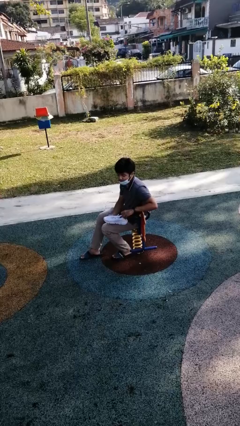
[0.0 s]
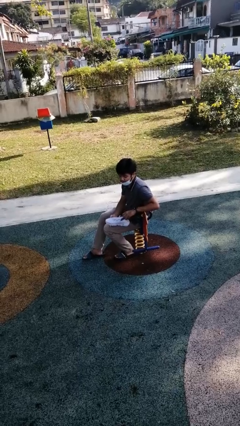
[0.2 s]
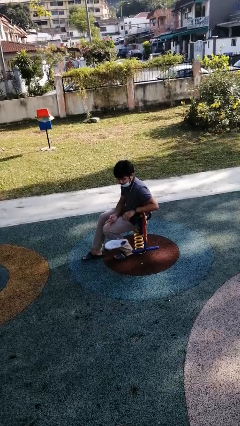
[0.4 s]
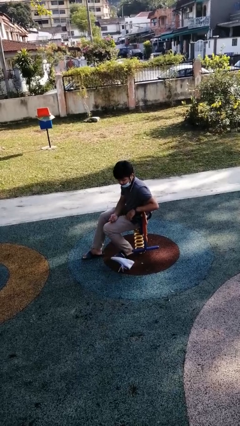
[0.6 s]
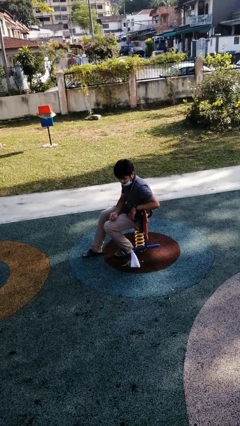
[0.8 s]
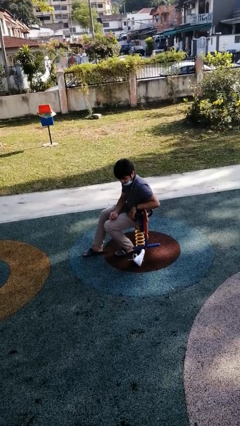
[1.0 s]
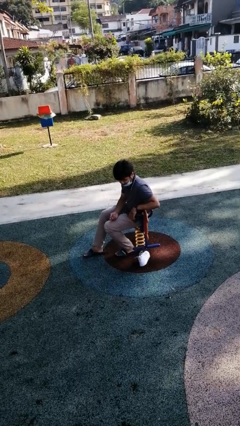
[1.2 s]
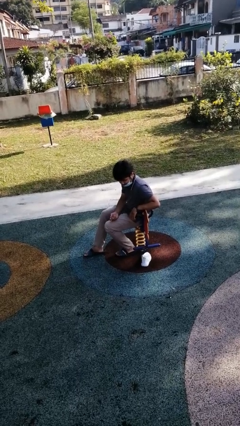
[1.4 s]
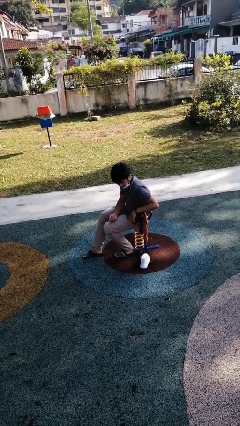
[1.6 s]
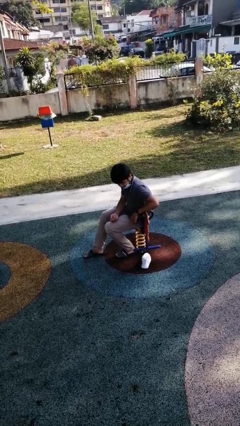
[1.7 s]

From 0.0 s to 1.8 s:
person drops object

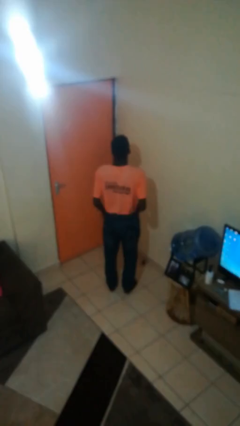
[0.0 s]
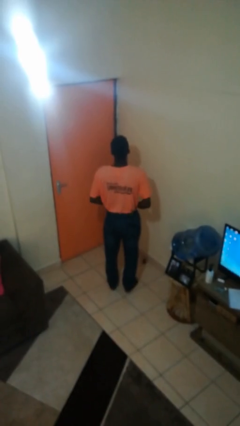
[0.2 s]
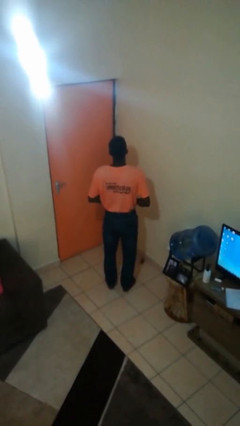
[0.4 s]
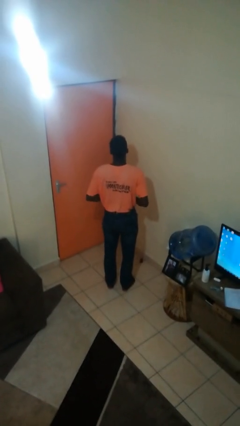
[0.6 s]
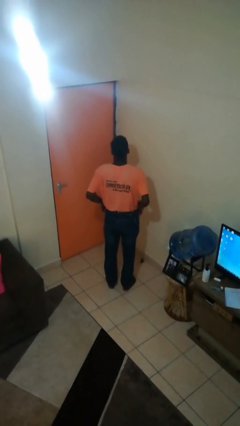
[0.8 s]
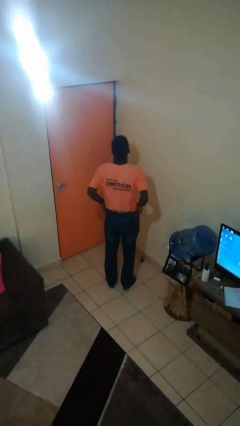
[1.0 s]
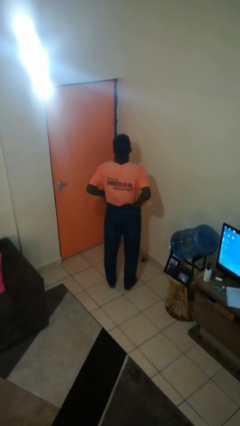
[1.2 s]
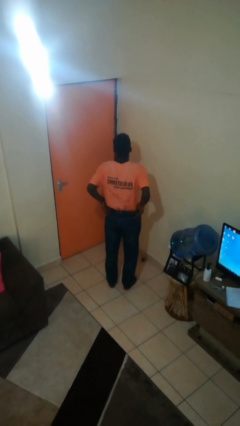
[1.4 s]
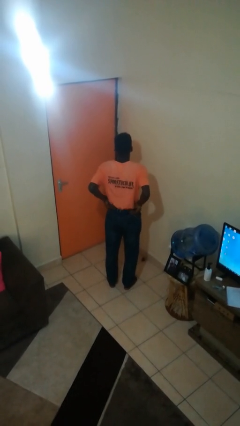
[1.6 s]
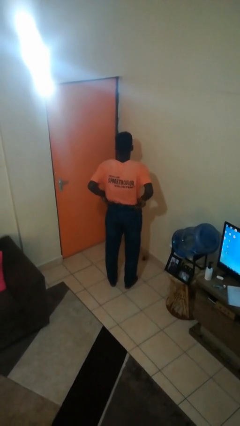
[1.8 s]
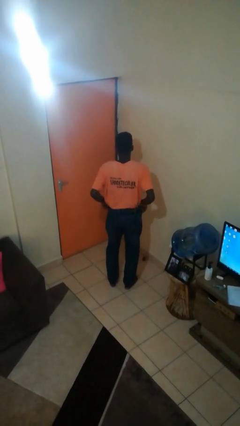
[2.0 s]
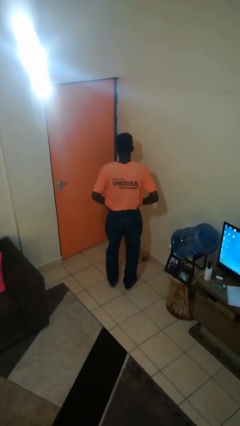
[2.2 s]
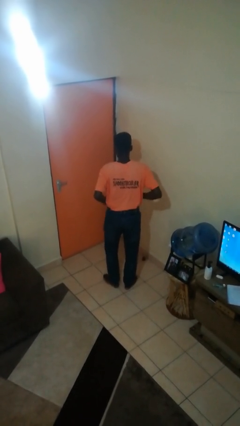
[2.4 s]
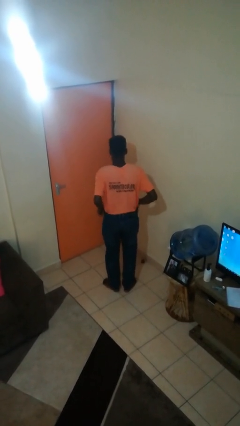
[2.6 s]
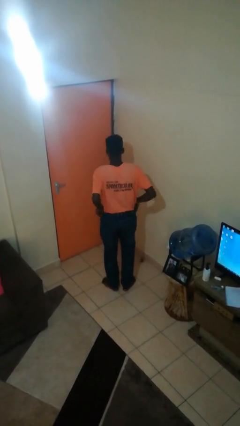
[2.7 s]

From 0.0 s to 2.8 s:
person hikes up pants

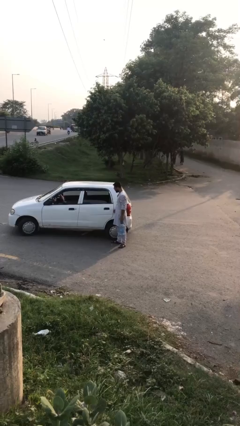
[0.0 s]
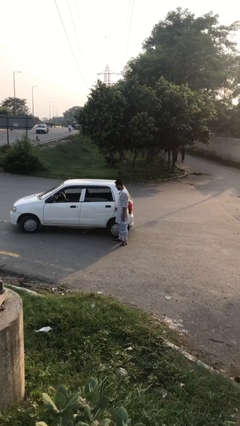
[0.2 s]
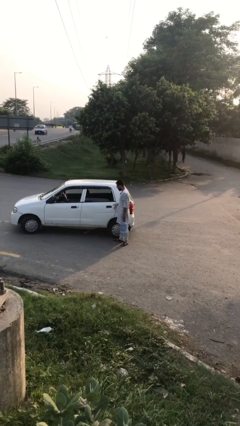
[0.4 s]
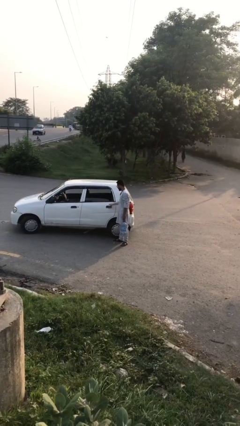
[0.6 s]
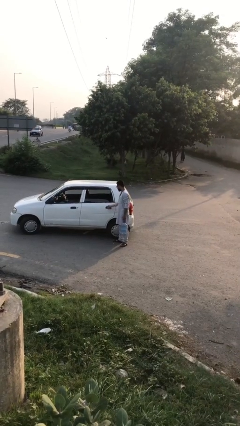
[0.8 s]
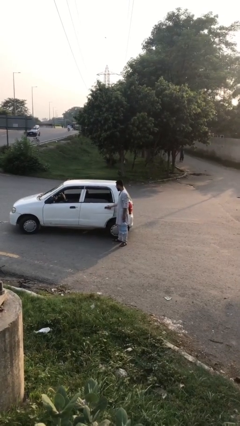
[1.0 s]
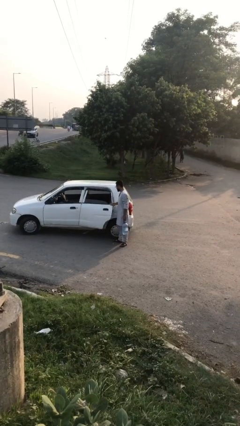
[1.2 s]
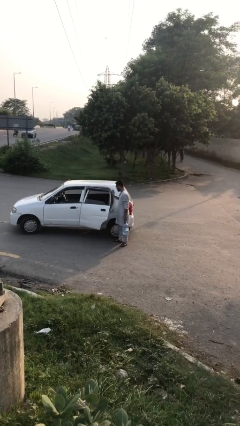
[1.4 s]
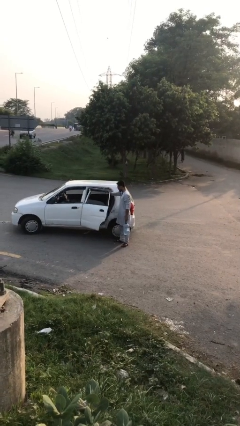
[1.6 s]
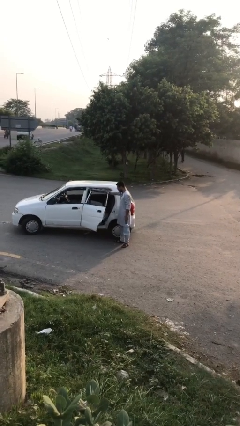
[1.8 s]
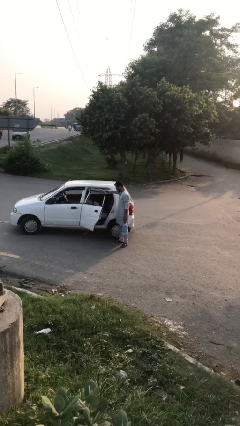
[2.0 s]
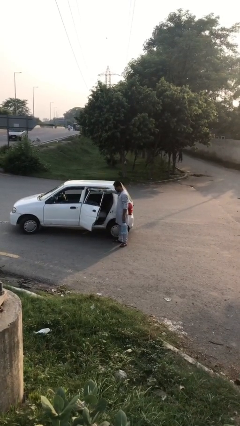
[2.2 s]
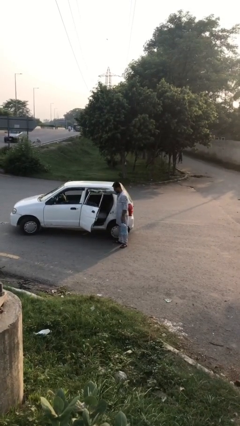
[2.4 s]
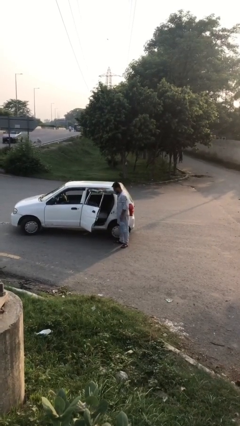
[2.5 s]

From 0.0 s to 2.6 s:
person opens car door

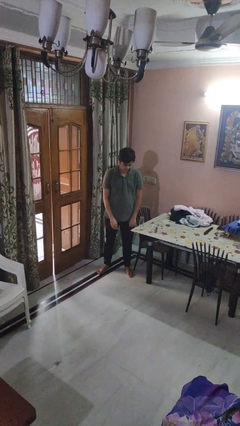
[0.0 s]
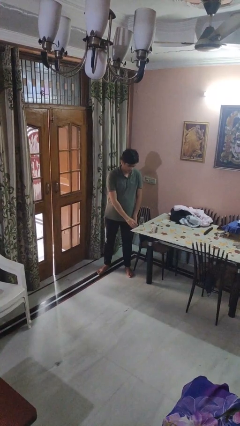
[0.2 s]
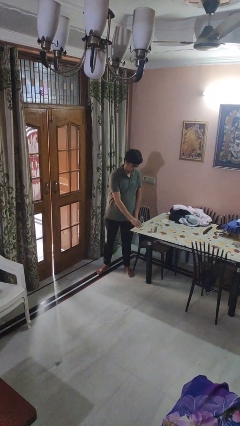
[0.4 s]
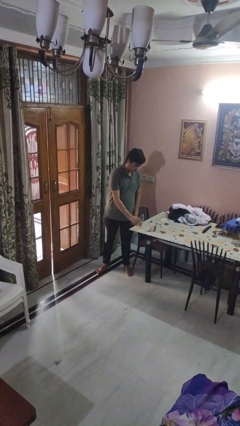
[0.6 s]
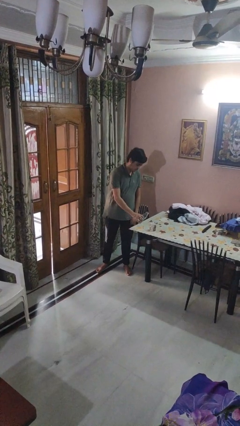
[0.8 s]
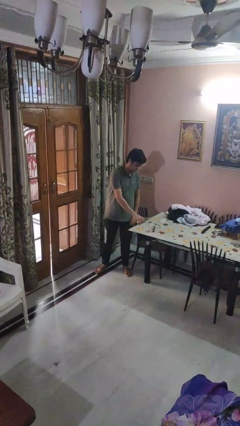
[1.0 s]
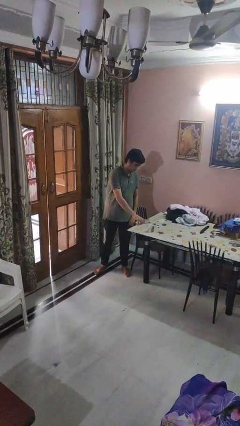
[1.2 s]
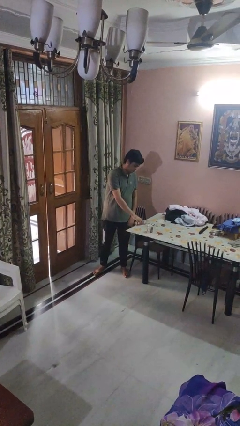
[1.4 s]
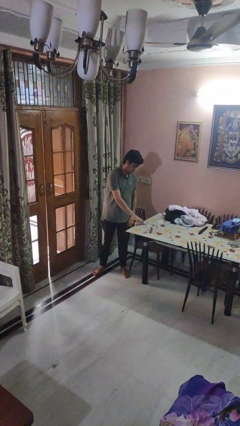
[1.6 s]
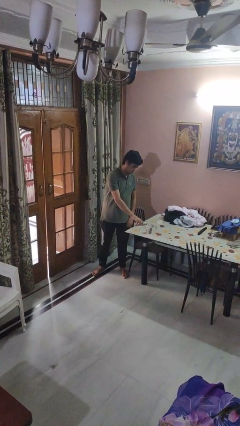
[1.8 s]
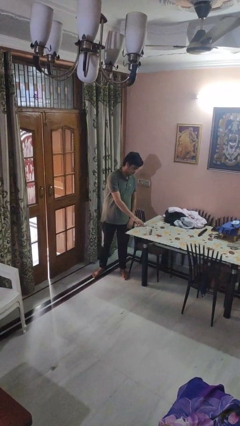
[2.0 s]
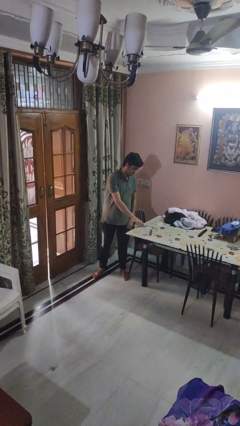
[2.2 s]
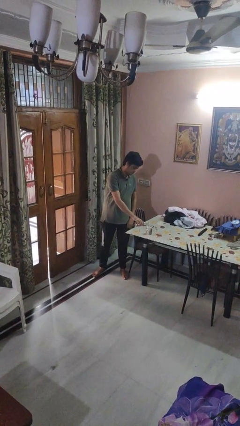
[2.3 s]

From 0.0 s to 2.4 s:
person pours liquid into cup

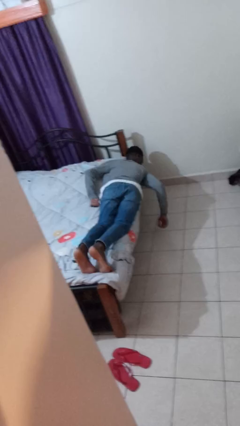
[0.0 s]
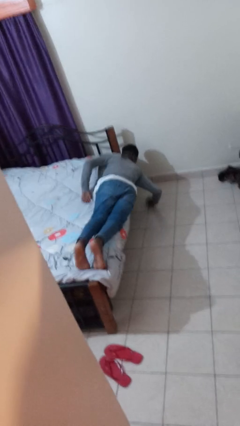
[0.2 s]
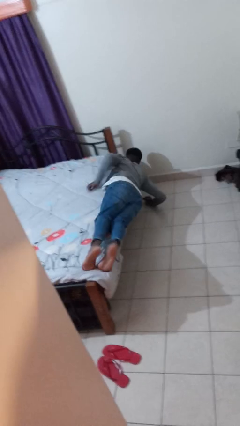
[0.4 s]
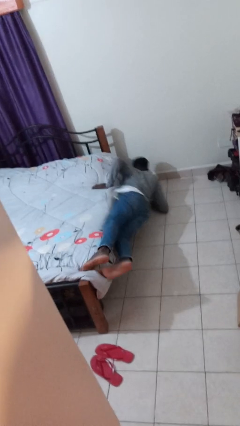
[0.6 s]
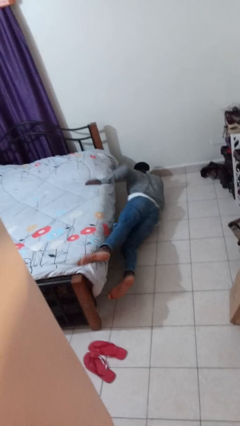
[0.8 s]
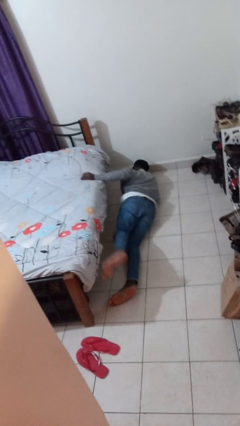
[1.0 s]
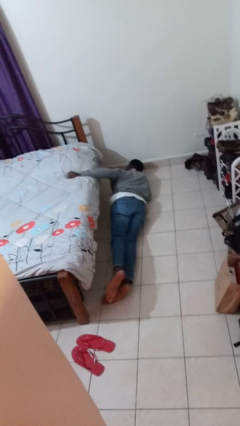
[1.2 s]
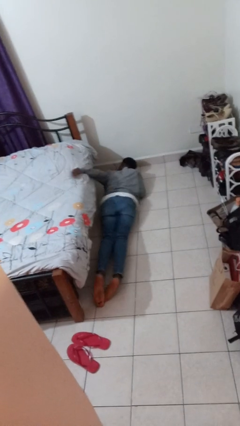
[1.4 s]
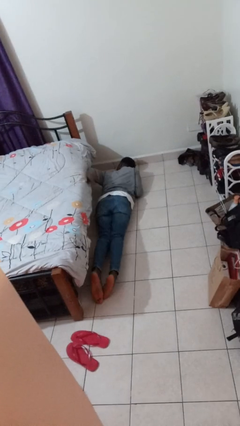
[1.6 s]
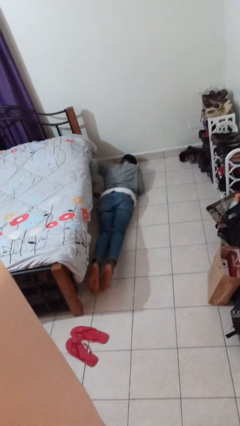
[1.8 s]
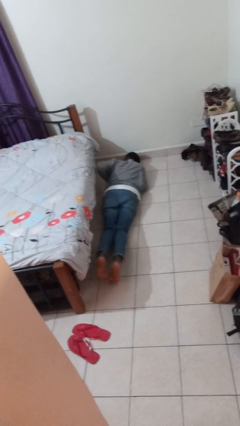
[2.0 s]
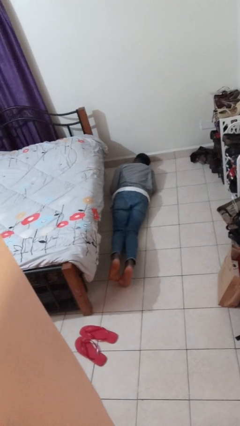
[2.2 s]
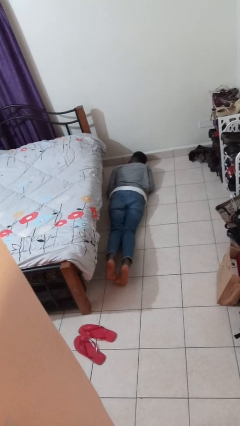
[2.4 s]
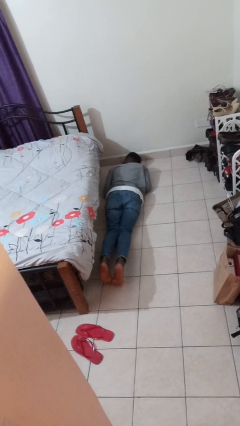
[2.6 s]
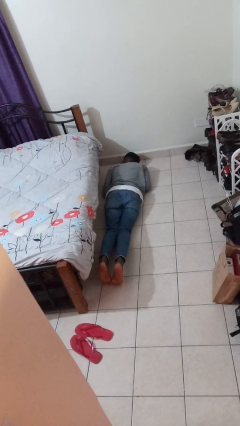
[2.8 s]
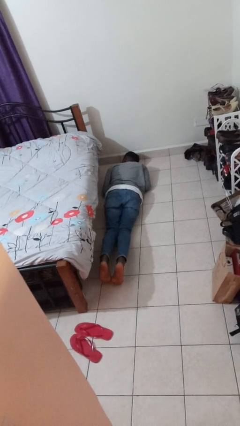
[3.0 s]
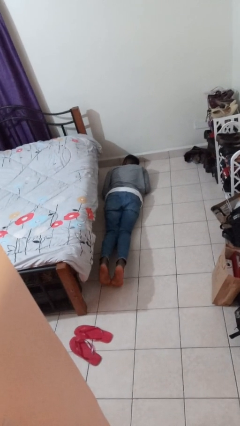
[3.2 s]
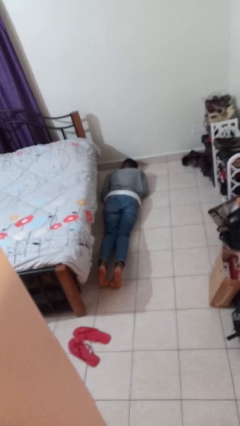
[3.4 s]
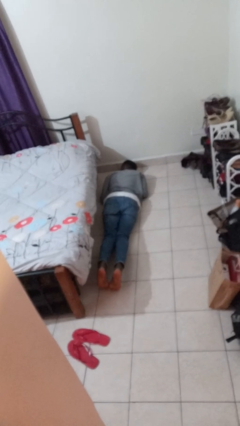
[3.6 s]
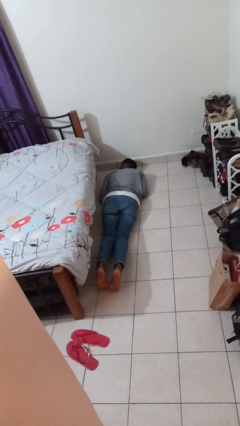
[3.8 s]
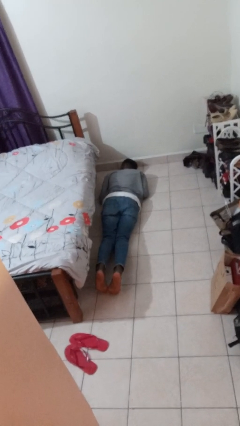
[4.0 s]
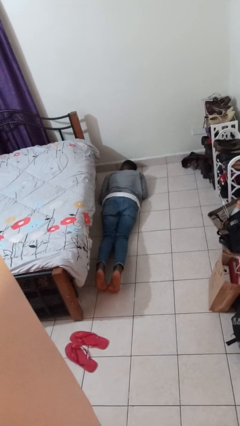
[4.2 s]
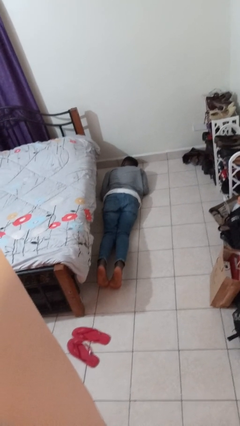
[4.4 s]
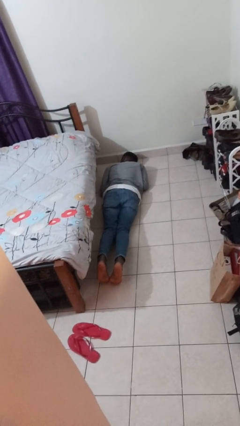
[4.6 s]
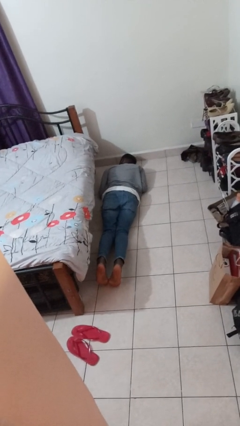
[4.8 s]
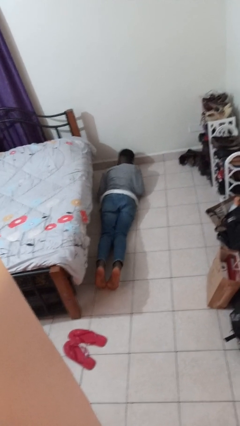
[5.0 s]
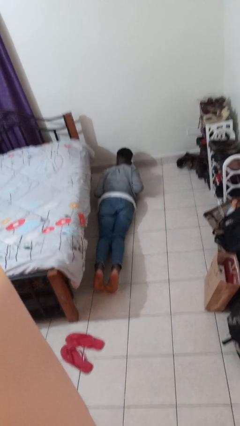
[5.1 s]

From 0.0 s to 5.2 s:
person falls from bed

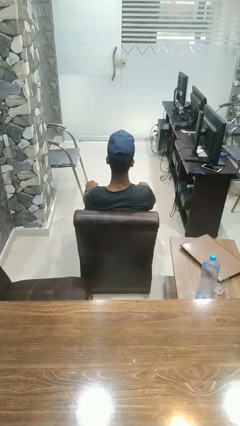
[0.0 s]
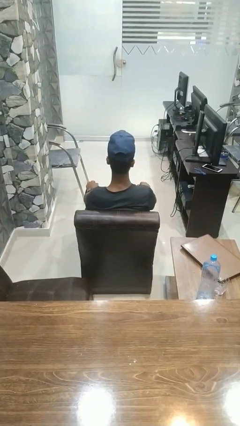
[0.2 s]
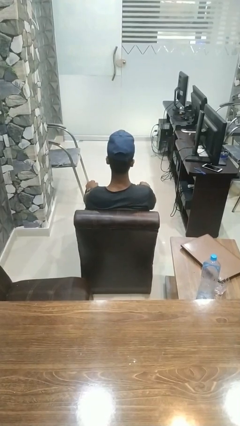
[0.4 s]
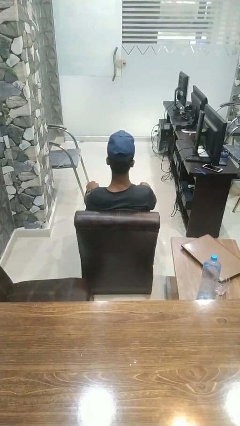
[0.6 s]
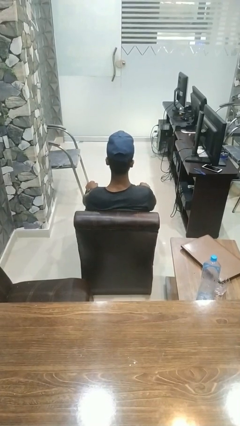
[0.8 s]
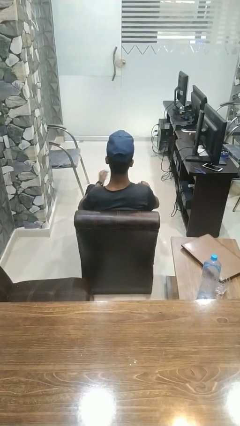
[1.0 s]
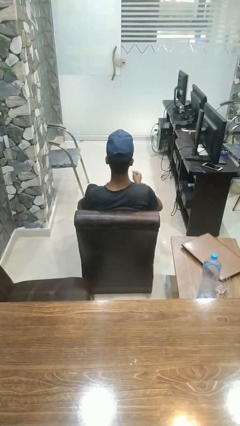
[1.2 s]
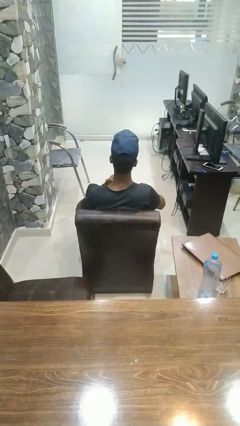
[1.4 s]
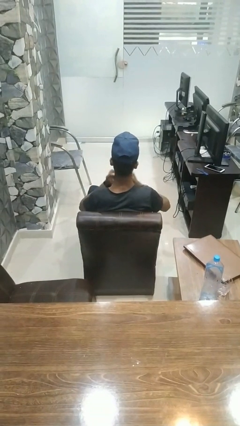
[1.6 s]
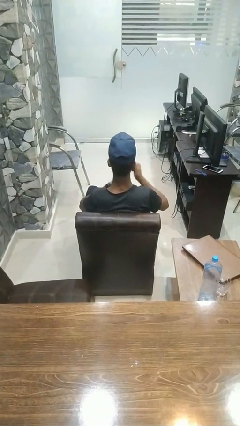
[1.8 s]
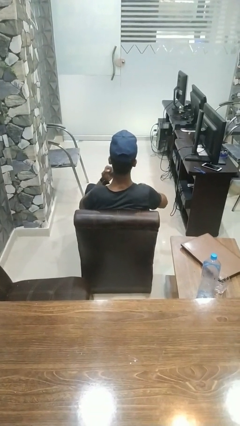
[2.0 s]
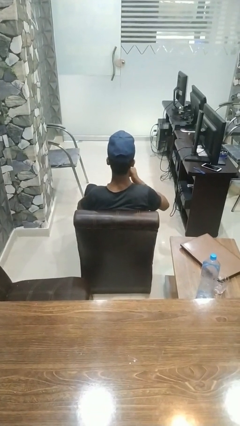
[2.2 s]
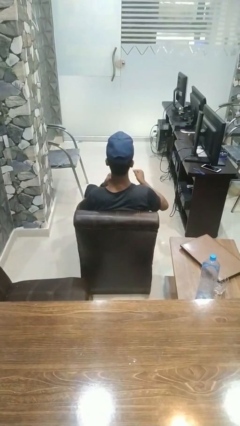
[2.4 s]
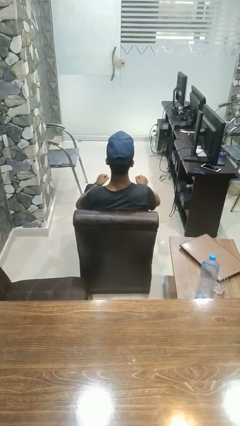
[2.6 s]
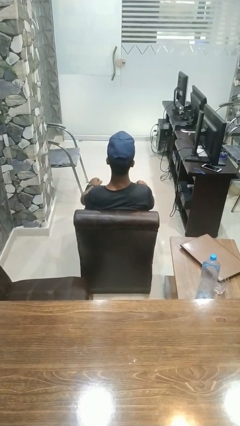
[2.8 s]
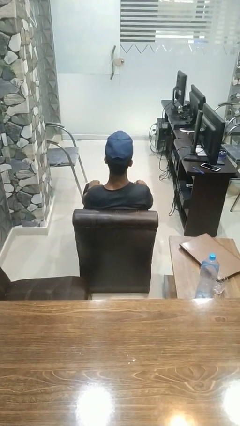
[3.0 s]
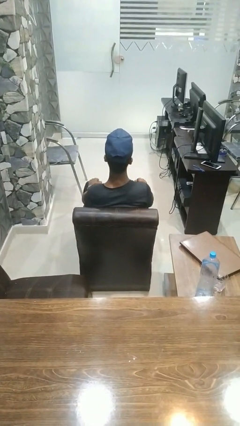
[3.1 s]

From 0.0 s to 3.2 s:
person drums on chest
